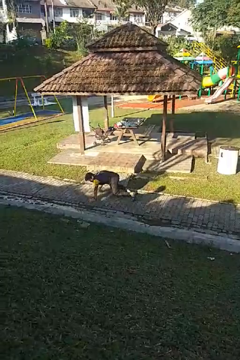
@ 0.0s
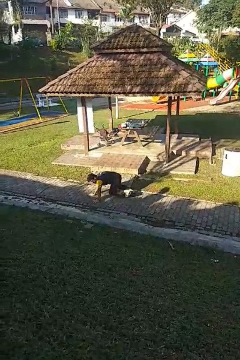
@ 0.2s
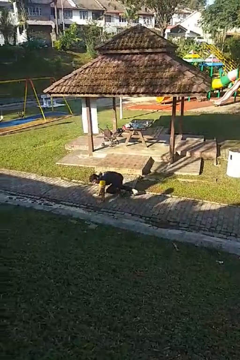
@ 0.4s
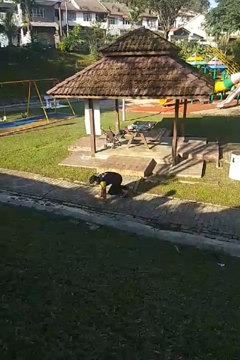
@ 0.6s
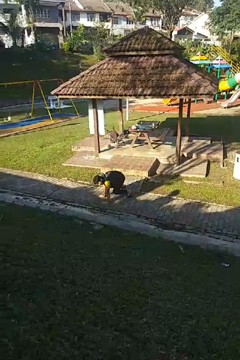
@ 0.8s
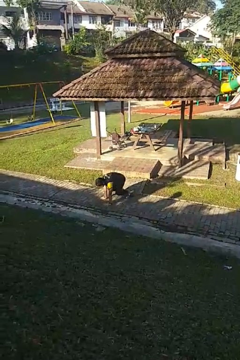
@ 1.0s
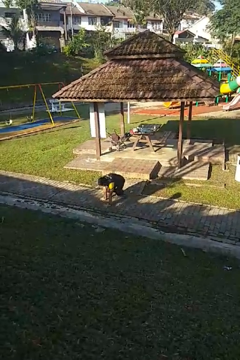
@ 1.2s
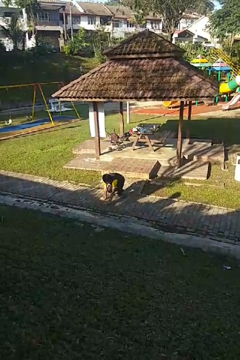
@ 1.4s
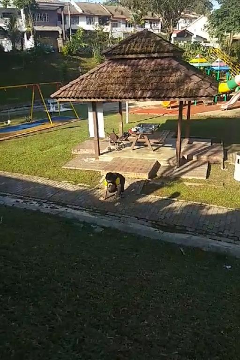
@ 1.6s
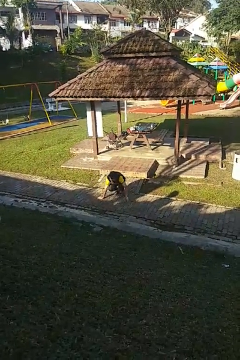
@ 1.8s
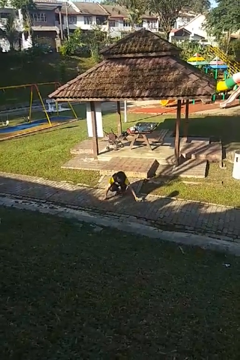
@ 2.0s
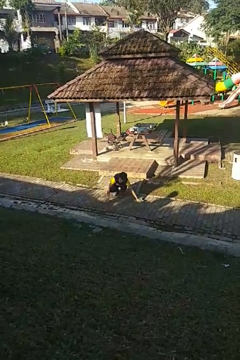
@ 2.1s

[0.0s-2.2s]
person crawls

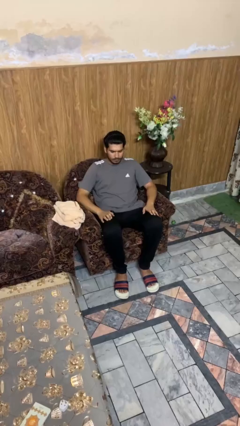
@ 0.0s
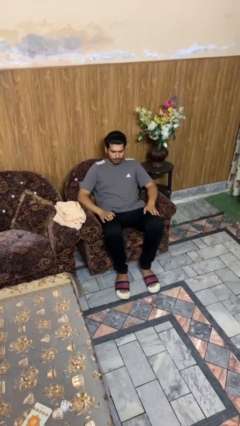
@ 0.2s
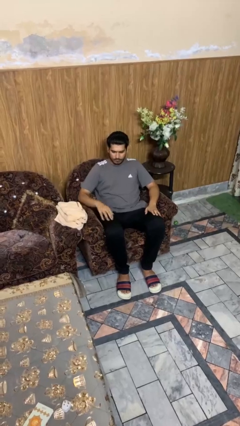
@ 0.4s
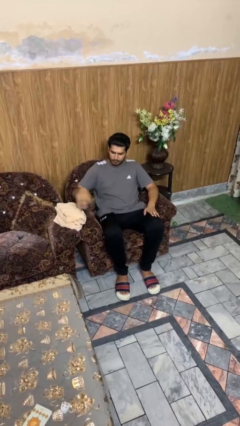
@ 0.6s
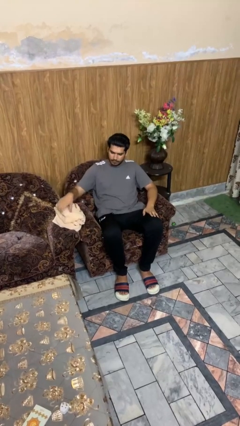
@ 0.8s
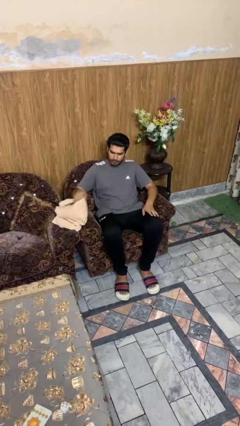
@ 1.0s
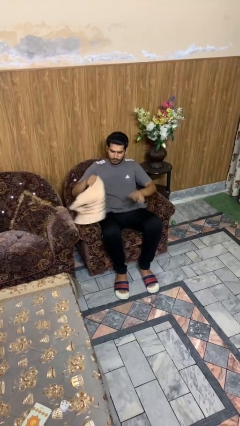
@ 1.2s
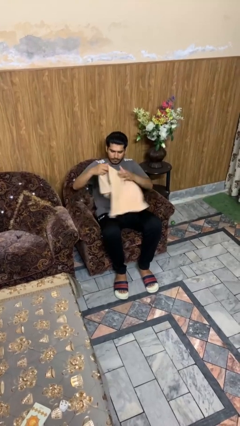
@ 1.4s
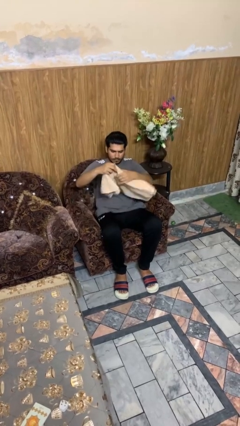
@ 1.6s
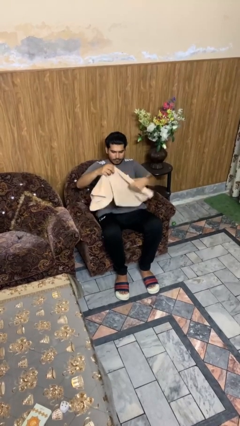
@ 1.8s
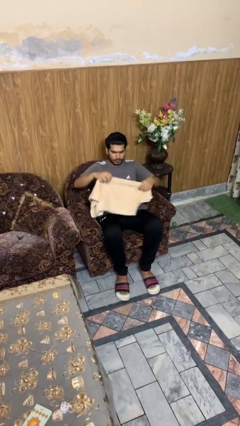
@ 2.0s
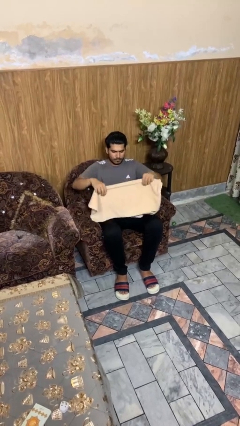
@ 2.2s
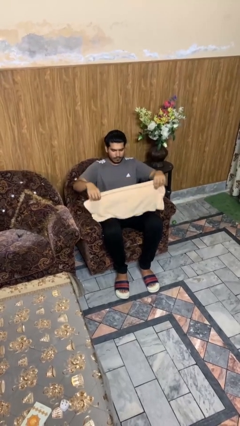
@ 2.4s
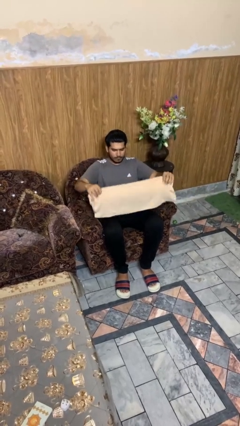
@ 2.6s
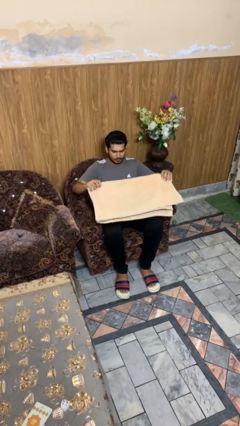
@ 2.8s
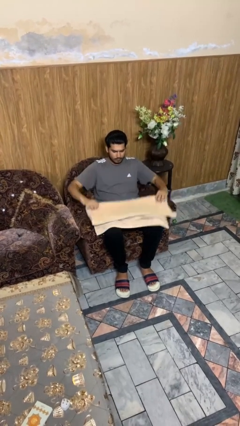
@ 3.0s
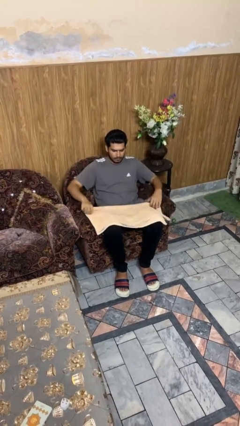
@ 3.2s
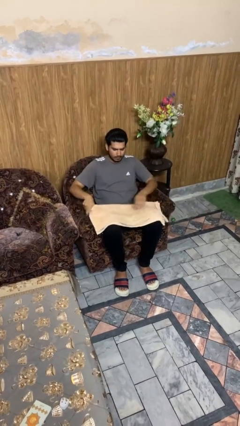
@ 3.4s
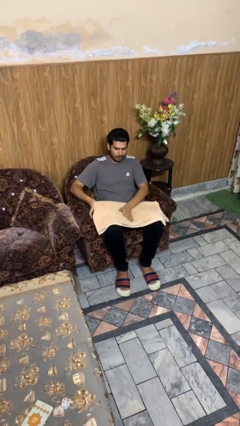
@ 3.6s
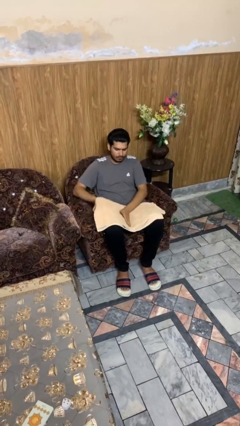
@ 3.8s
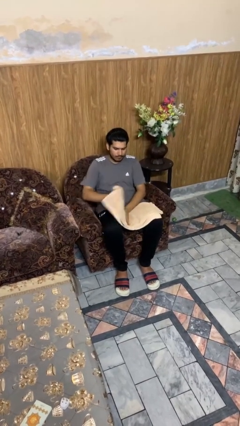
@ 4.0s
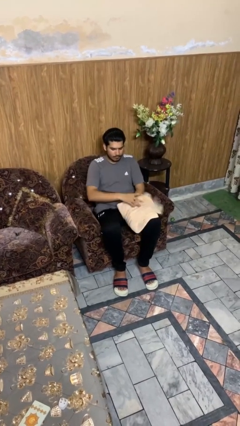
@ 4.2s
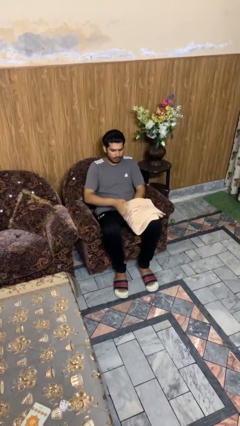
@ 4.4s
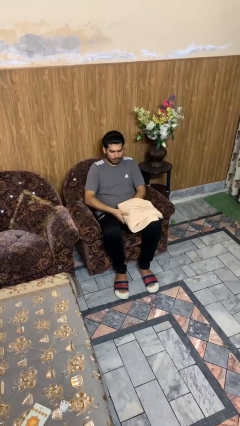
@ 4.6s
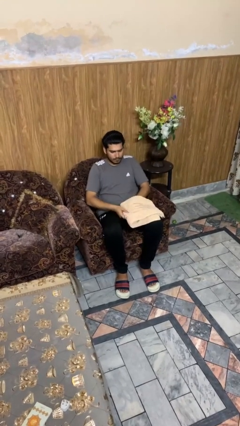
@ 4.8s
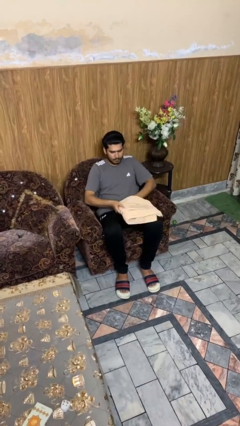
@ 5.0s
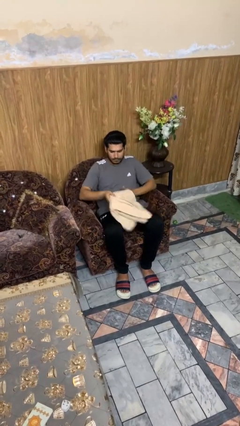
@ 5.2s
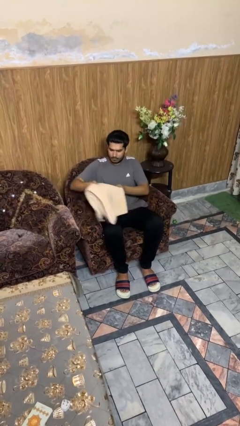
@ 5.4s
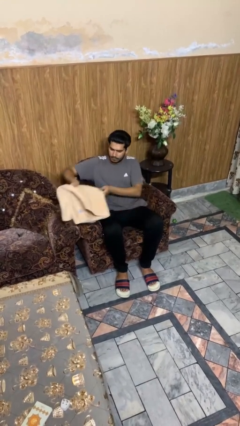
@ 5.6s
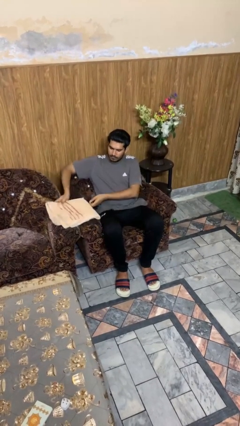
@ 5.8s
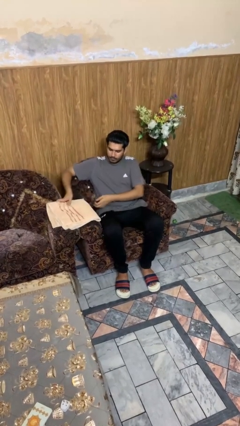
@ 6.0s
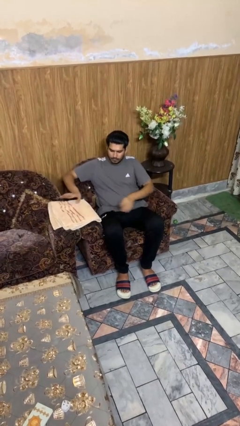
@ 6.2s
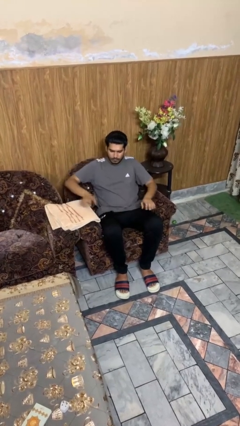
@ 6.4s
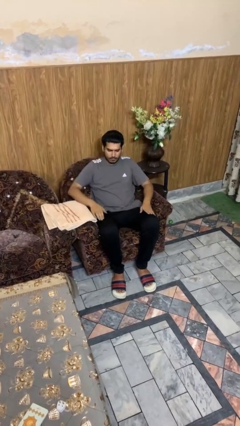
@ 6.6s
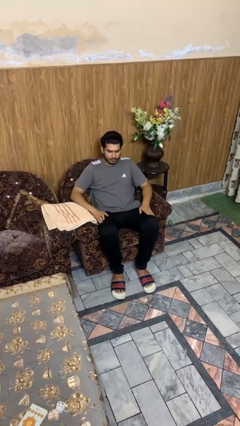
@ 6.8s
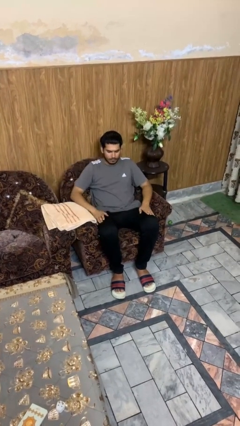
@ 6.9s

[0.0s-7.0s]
person folds towel

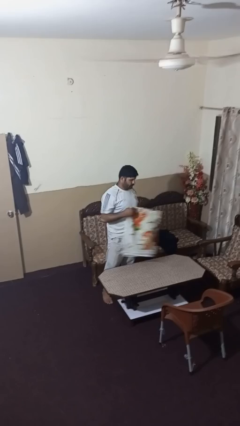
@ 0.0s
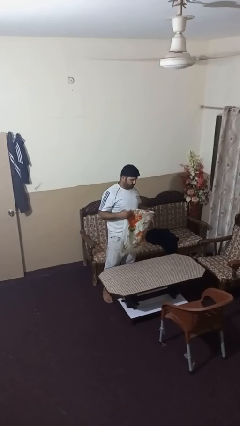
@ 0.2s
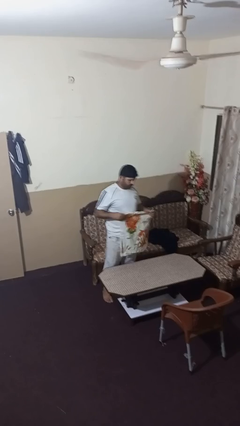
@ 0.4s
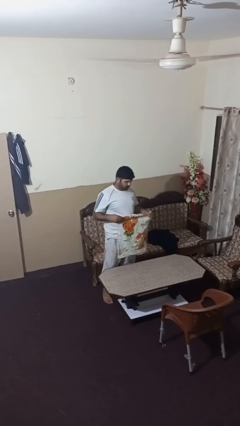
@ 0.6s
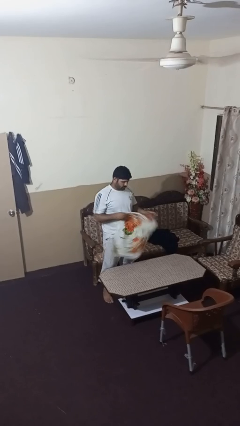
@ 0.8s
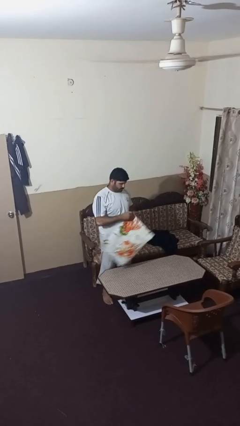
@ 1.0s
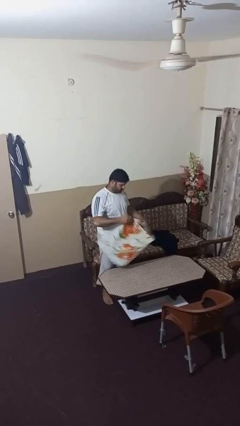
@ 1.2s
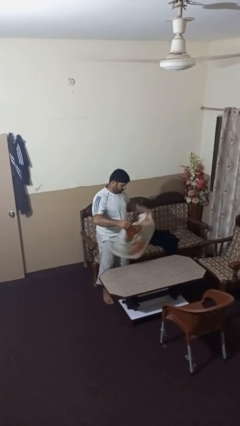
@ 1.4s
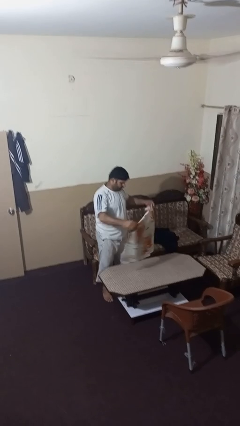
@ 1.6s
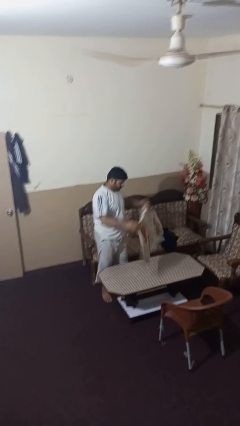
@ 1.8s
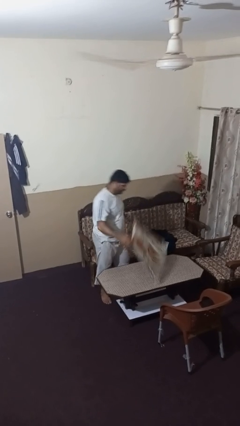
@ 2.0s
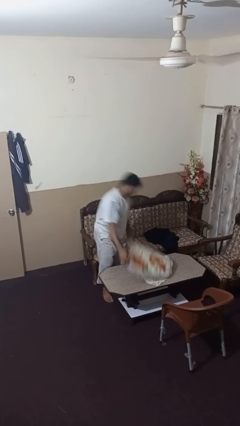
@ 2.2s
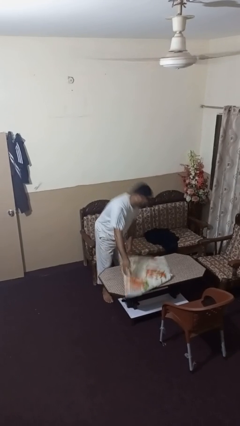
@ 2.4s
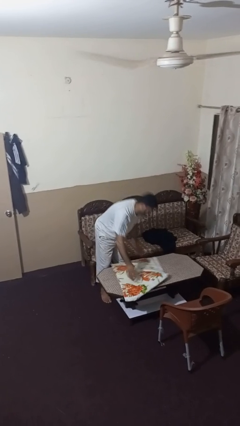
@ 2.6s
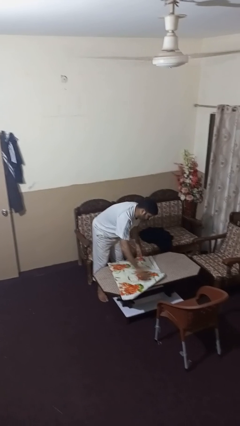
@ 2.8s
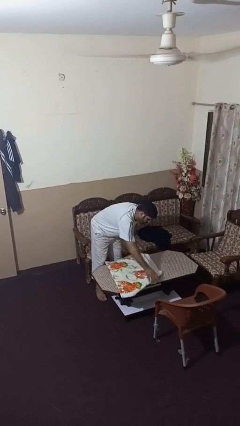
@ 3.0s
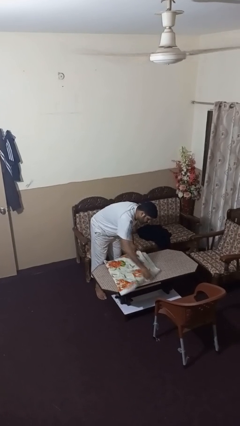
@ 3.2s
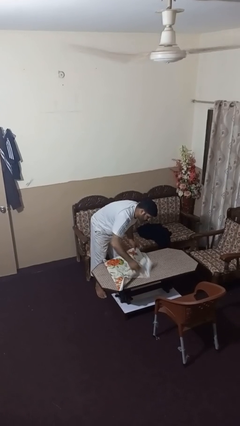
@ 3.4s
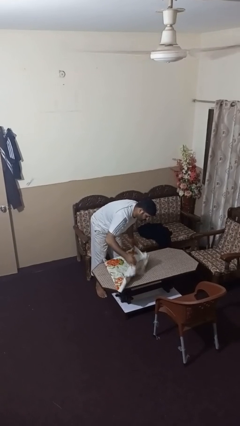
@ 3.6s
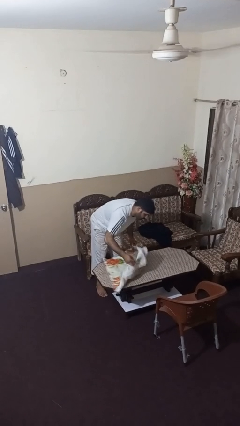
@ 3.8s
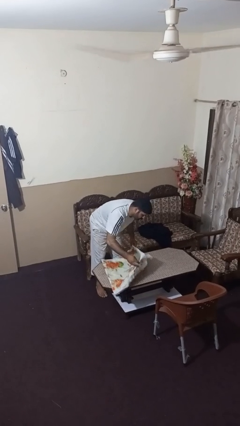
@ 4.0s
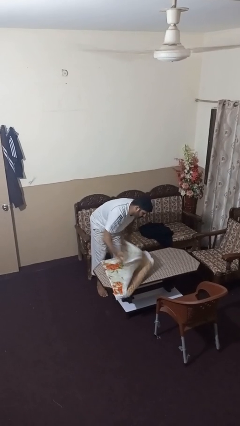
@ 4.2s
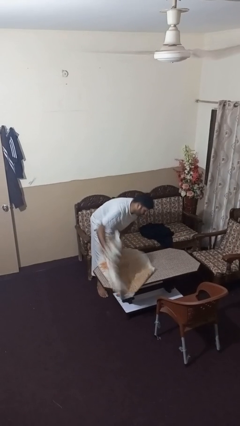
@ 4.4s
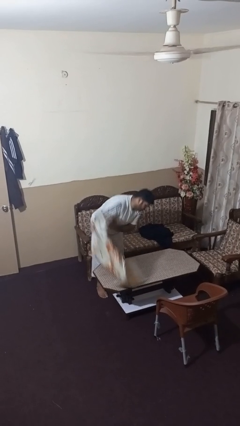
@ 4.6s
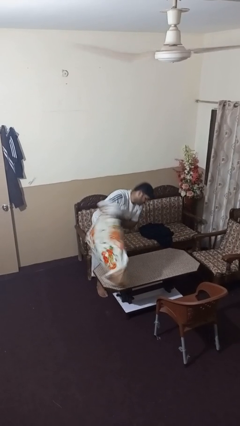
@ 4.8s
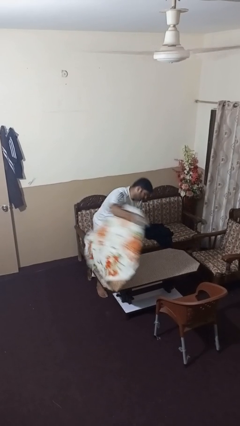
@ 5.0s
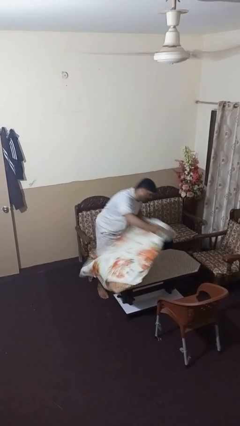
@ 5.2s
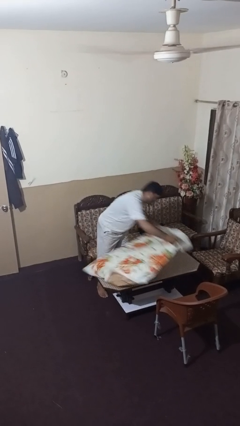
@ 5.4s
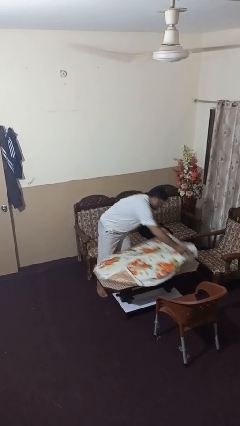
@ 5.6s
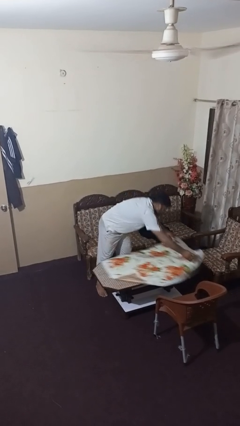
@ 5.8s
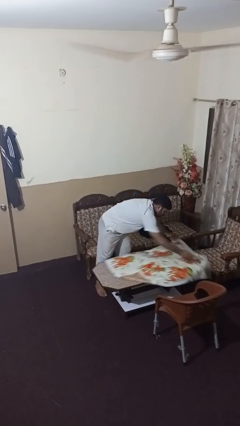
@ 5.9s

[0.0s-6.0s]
person spreads tablecloth

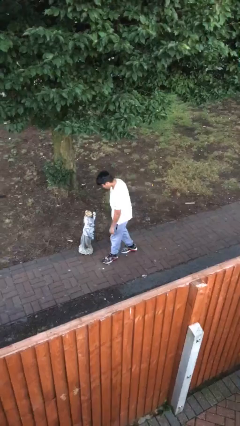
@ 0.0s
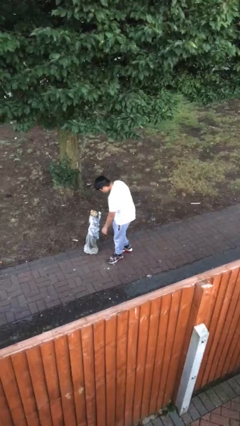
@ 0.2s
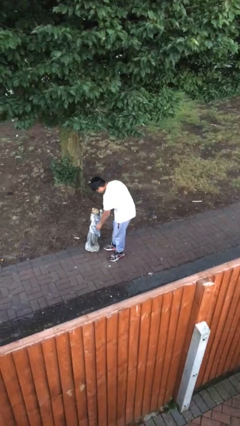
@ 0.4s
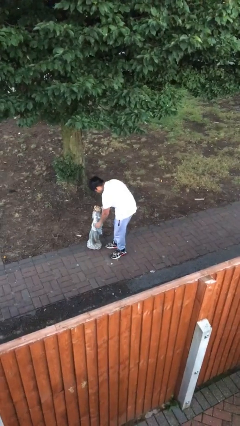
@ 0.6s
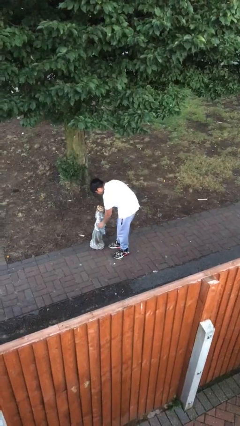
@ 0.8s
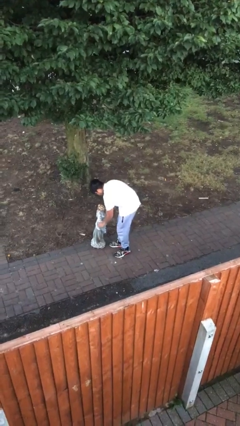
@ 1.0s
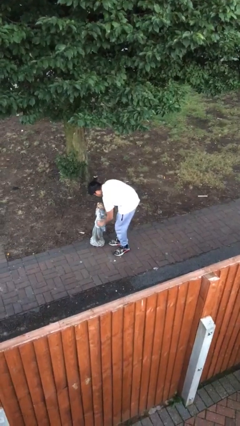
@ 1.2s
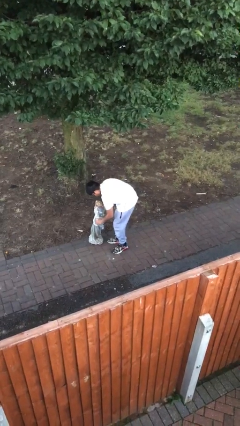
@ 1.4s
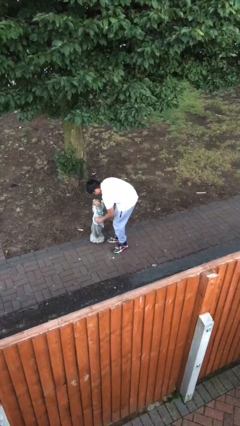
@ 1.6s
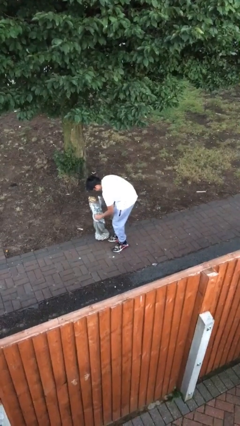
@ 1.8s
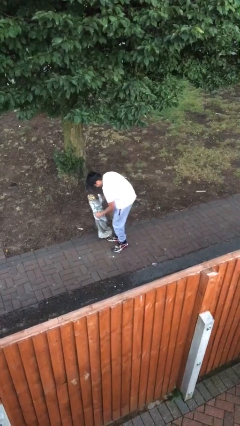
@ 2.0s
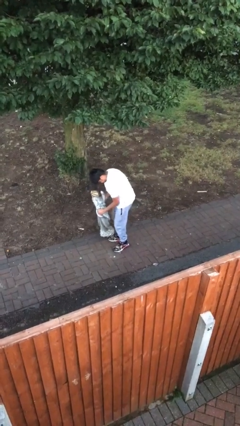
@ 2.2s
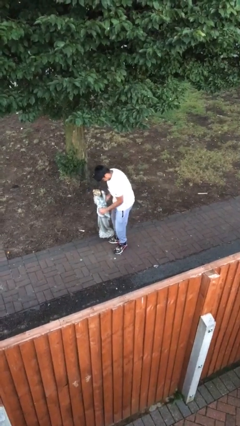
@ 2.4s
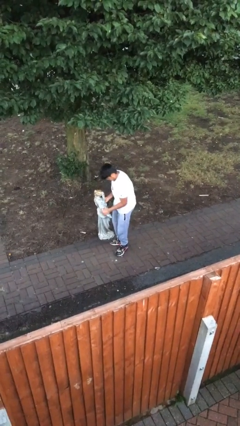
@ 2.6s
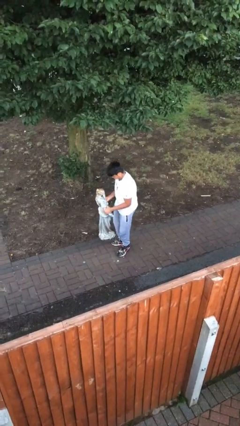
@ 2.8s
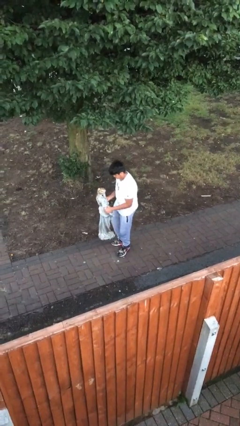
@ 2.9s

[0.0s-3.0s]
person picks up object from floor
